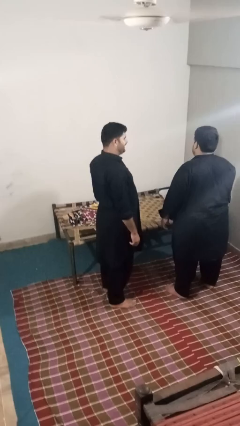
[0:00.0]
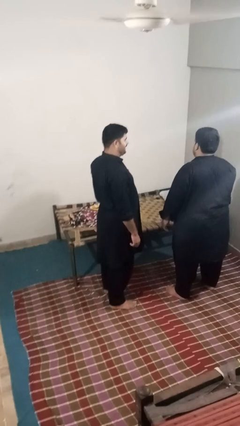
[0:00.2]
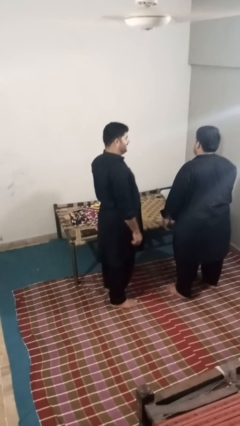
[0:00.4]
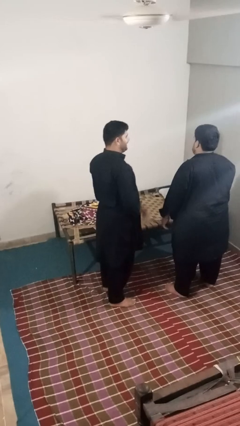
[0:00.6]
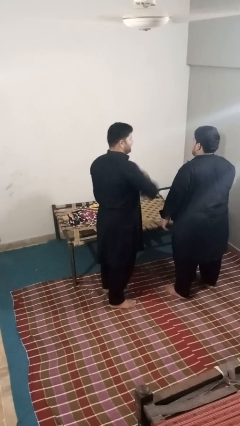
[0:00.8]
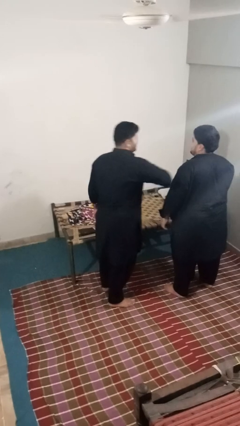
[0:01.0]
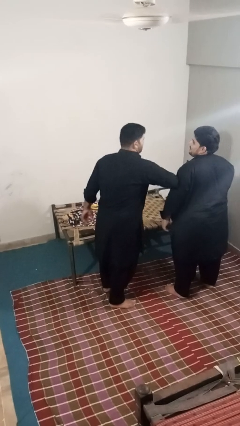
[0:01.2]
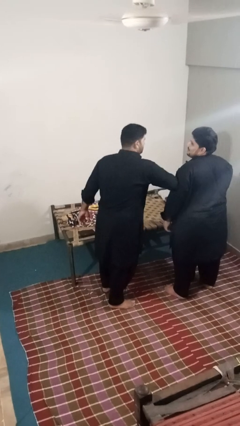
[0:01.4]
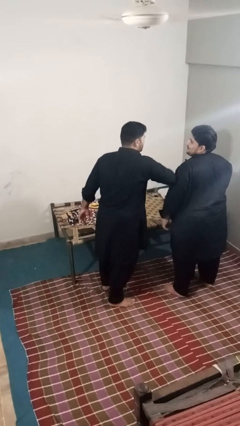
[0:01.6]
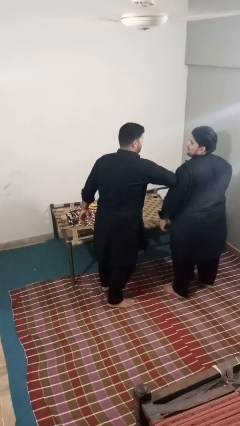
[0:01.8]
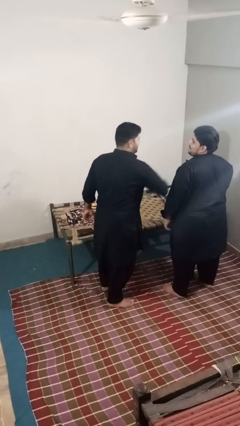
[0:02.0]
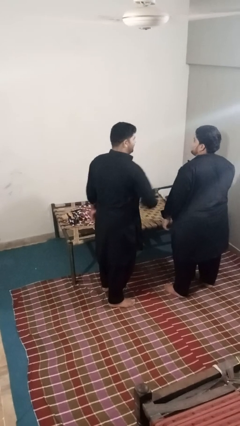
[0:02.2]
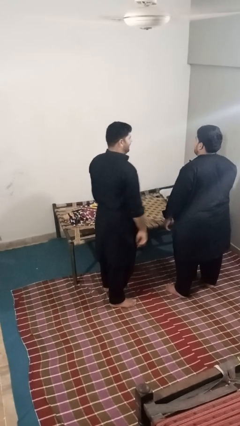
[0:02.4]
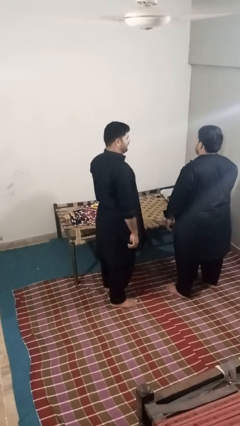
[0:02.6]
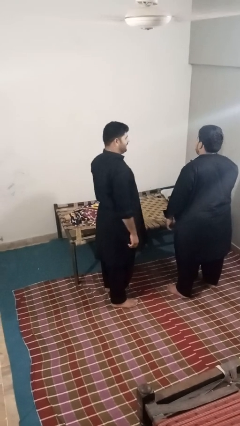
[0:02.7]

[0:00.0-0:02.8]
person nudges person with elbow

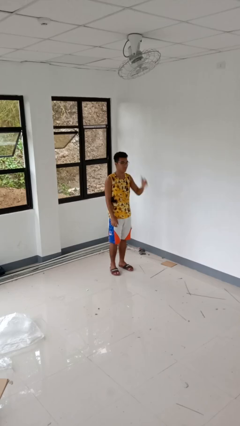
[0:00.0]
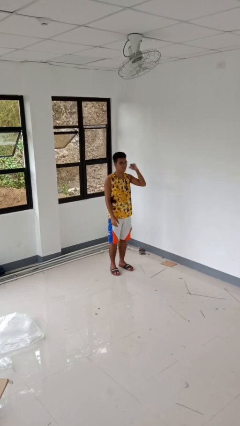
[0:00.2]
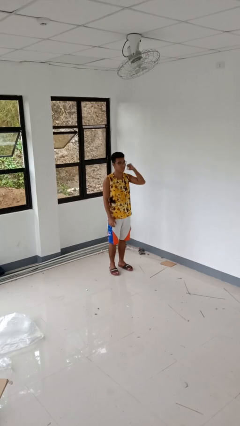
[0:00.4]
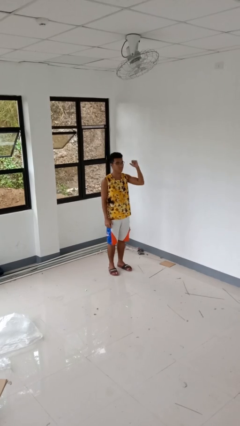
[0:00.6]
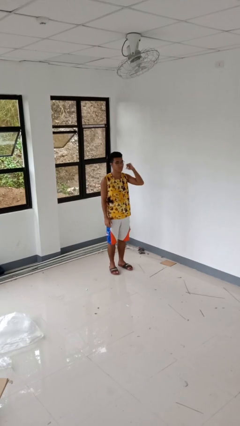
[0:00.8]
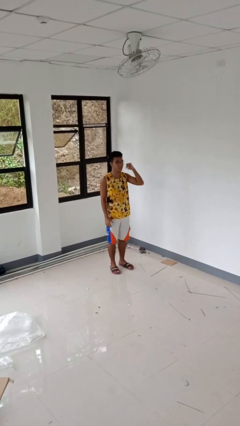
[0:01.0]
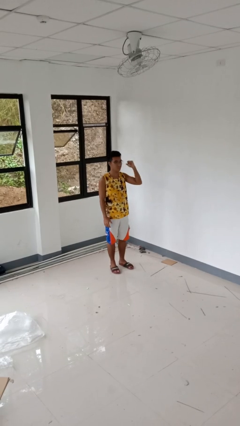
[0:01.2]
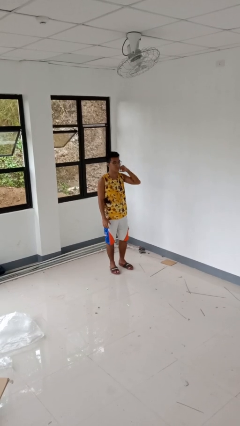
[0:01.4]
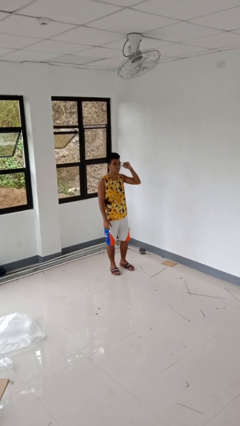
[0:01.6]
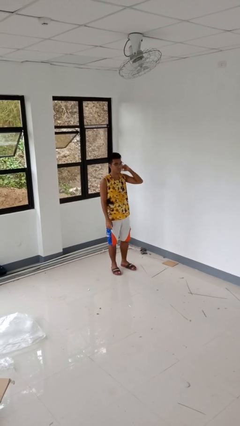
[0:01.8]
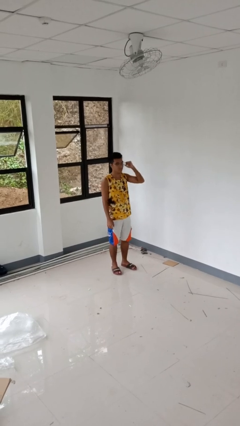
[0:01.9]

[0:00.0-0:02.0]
person gestures behind me

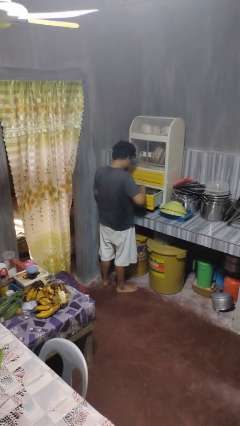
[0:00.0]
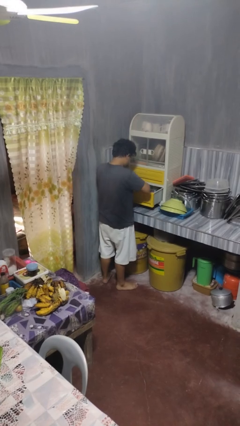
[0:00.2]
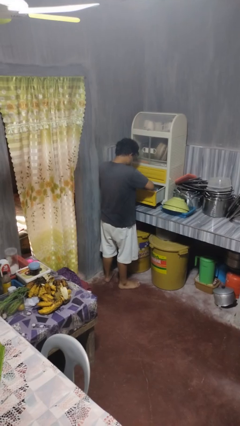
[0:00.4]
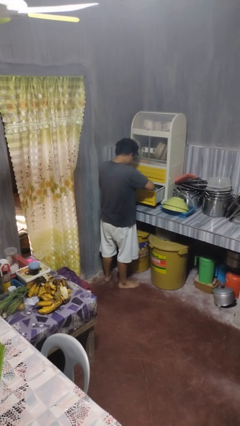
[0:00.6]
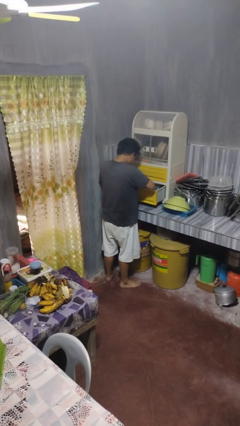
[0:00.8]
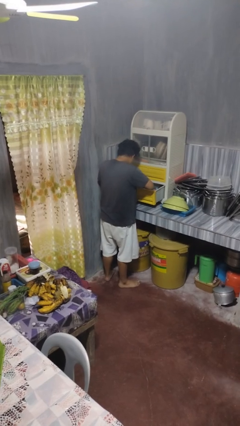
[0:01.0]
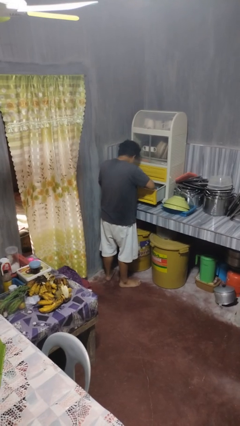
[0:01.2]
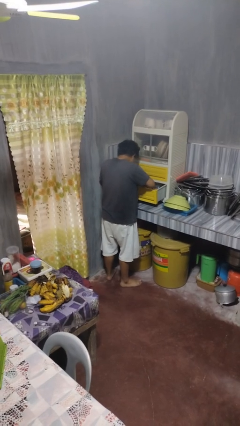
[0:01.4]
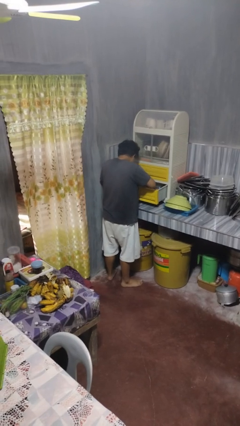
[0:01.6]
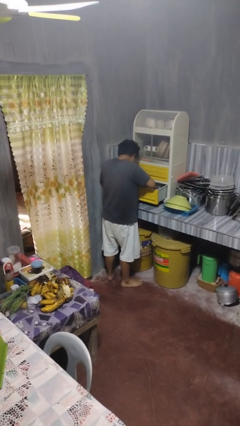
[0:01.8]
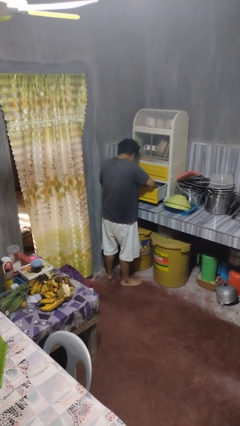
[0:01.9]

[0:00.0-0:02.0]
person searches in kitchen drawer

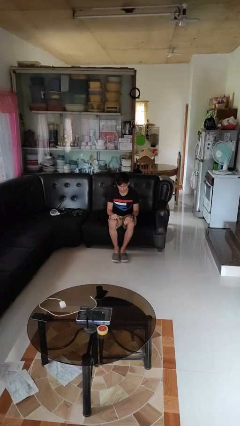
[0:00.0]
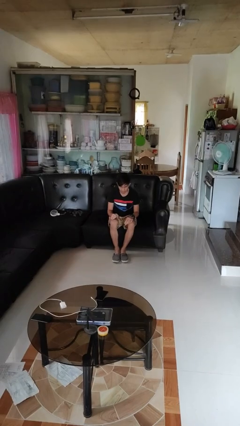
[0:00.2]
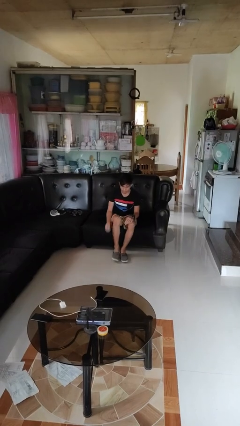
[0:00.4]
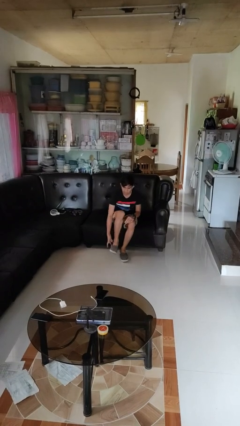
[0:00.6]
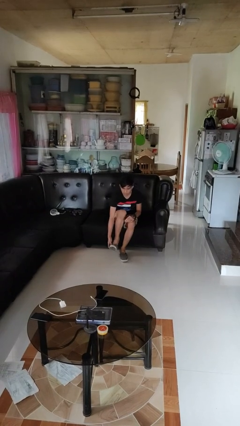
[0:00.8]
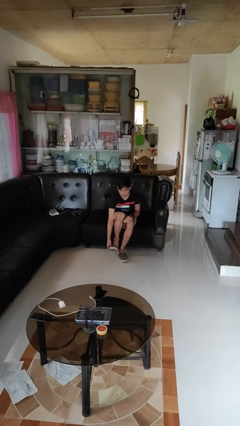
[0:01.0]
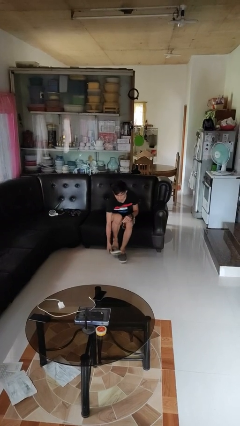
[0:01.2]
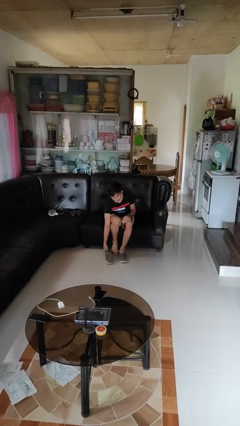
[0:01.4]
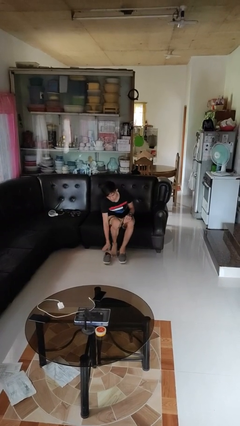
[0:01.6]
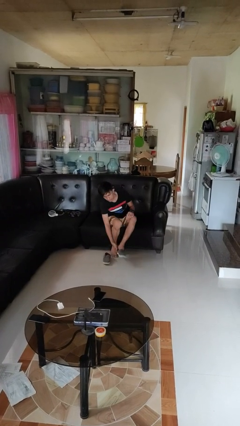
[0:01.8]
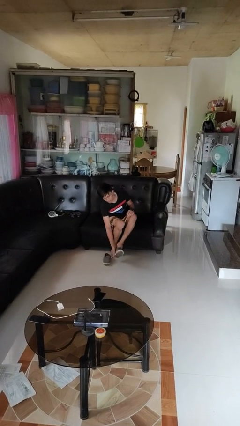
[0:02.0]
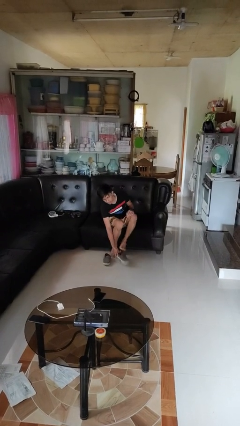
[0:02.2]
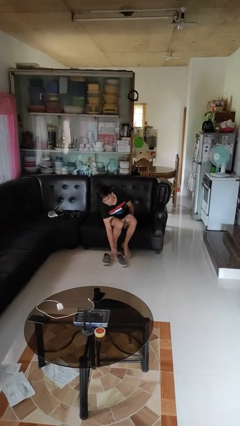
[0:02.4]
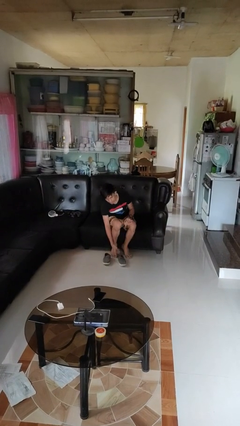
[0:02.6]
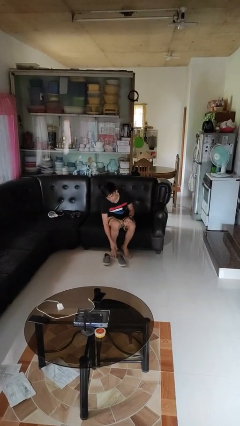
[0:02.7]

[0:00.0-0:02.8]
person takes off shoes

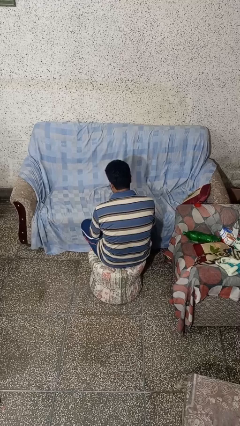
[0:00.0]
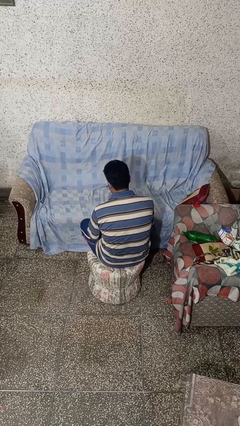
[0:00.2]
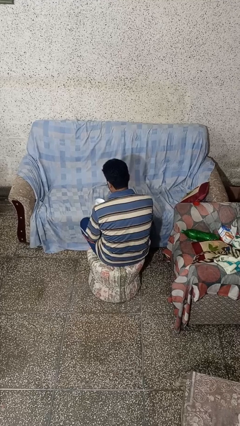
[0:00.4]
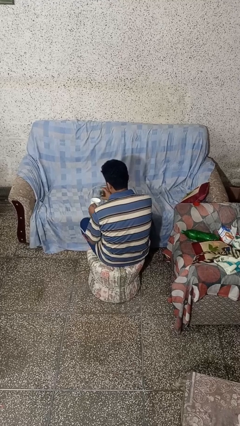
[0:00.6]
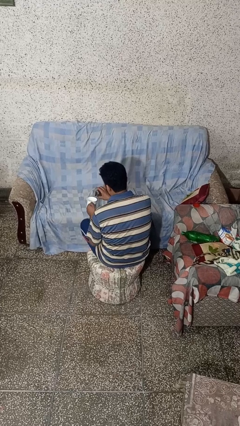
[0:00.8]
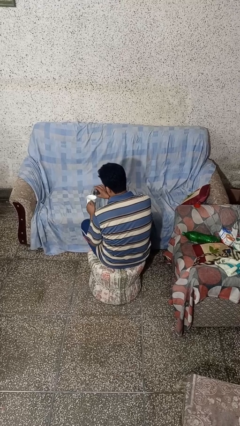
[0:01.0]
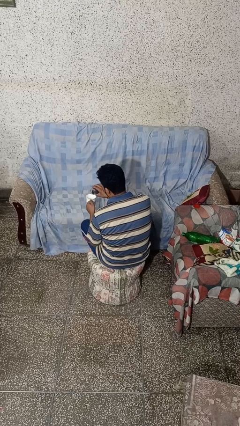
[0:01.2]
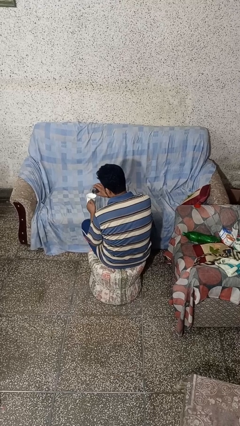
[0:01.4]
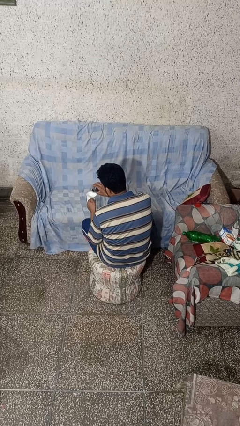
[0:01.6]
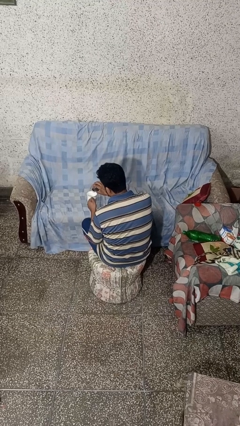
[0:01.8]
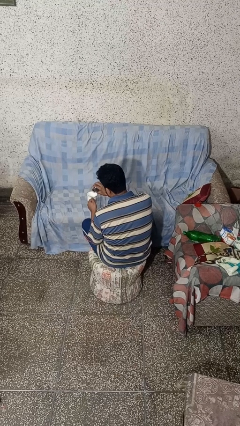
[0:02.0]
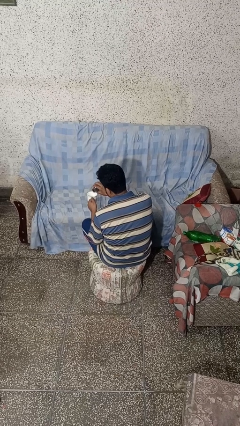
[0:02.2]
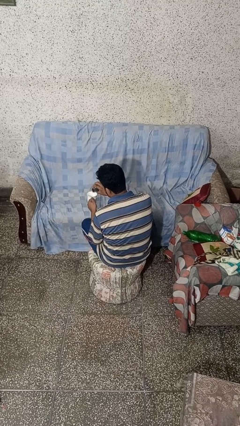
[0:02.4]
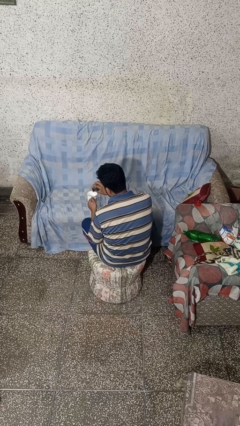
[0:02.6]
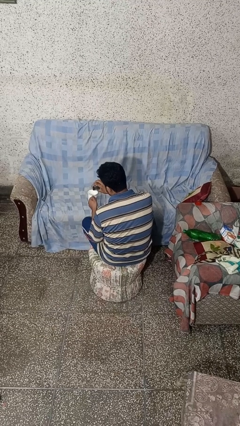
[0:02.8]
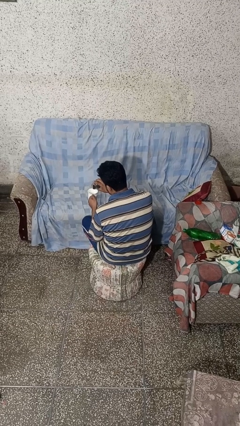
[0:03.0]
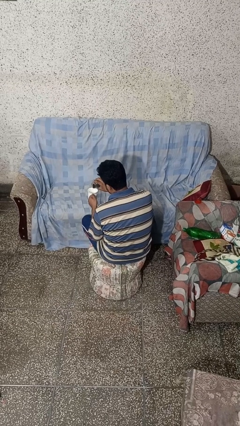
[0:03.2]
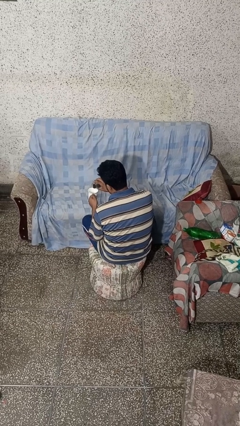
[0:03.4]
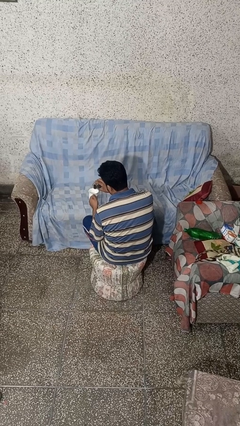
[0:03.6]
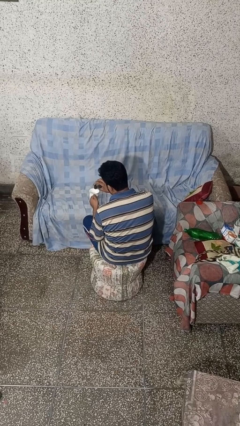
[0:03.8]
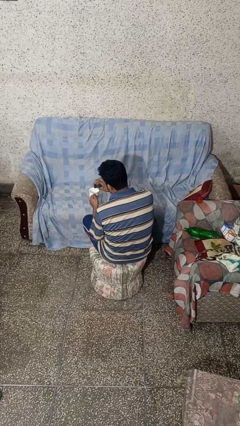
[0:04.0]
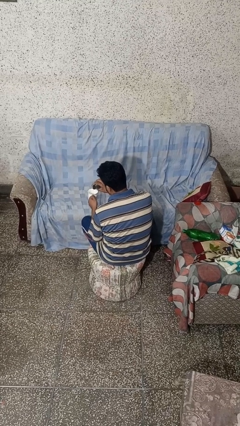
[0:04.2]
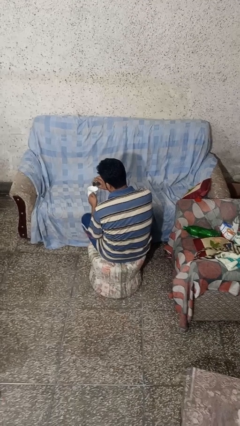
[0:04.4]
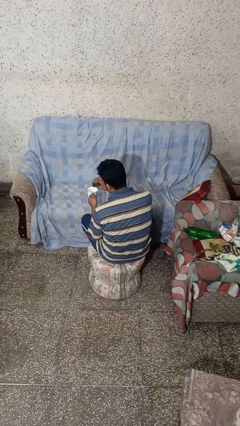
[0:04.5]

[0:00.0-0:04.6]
person pours coffee into mug

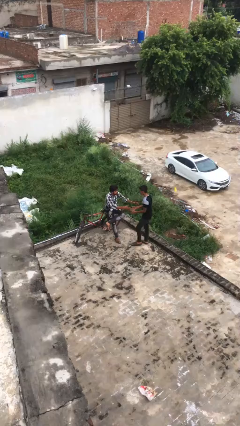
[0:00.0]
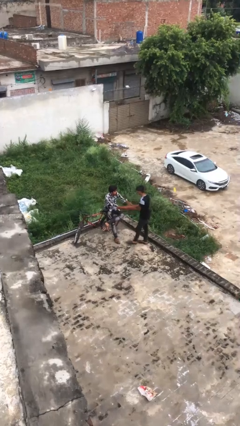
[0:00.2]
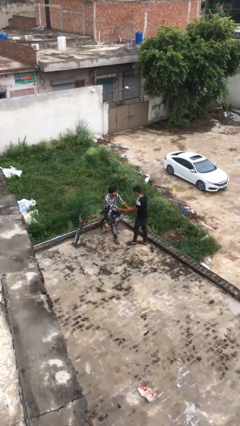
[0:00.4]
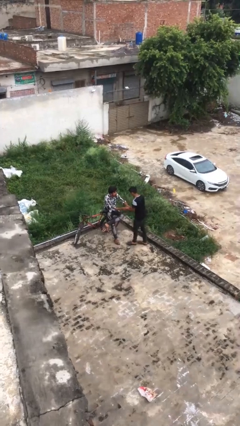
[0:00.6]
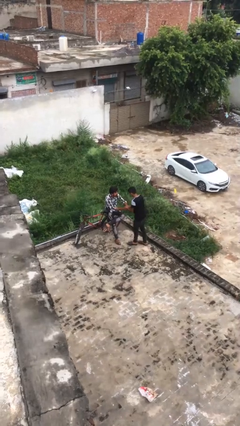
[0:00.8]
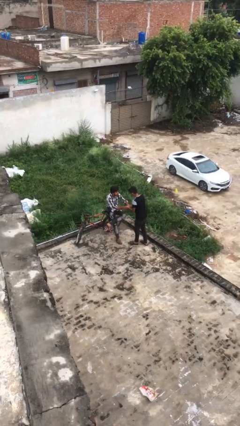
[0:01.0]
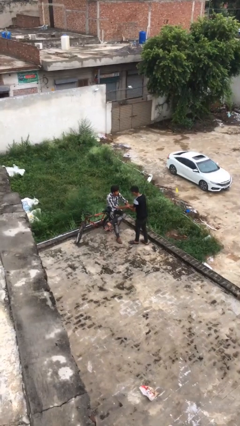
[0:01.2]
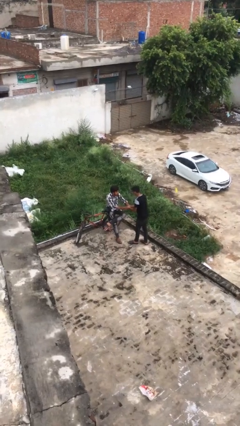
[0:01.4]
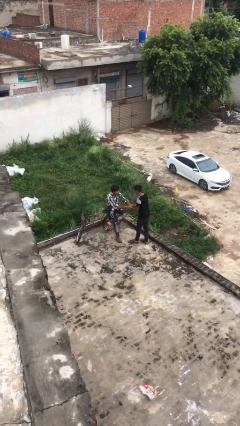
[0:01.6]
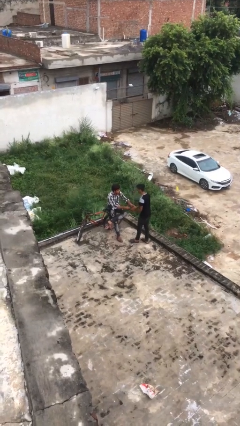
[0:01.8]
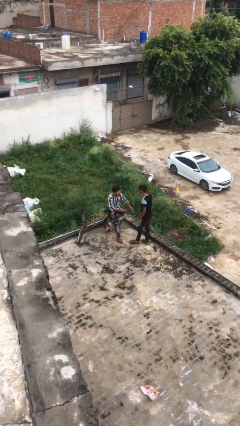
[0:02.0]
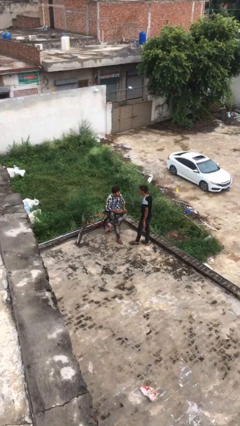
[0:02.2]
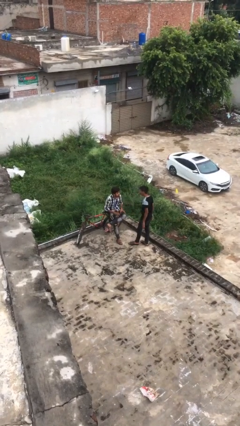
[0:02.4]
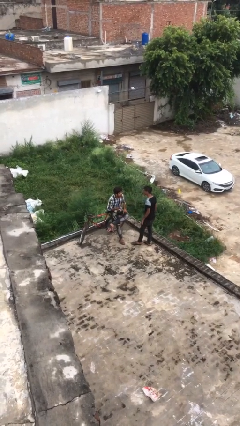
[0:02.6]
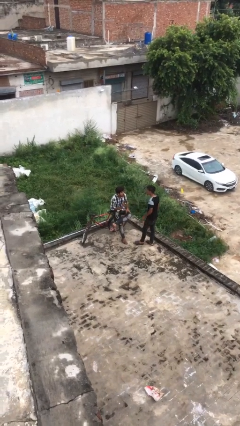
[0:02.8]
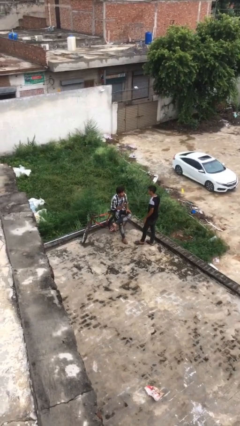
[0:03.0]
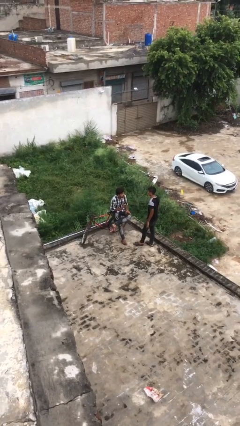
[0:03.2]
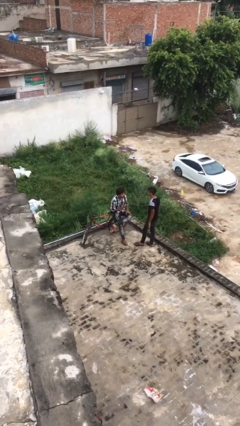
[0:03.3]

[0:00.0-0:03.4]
person shakes hand
